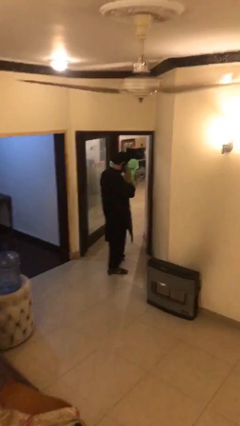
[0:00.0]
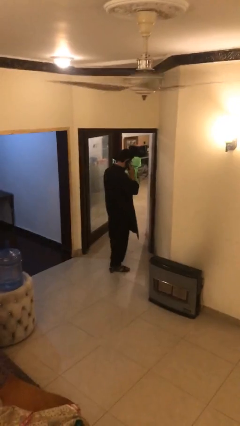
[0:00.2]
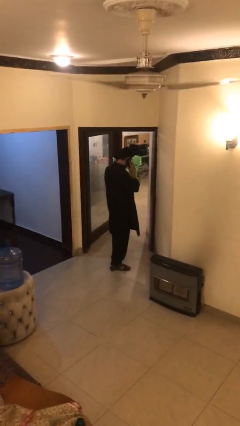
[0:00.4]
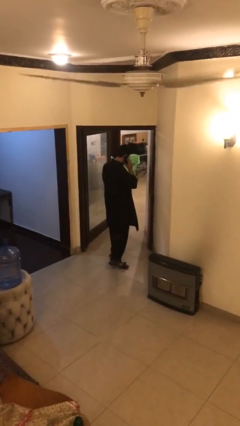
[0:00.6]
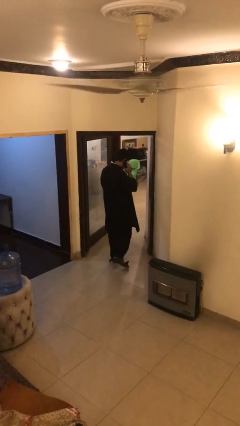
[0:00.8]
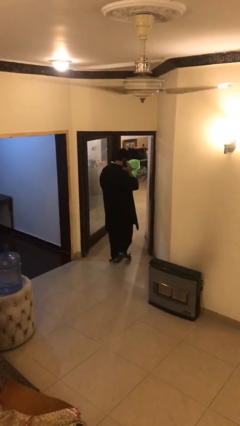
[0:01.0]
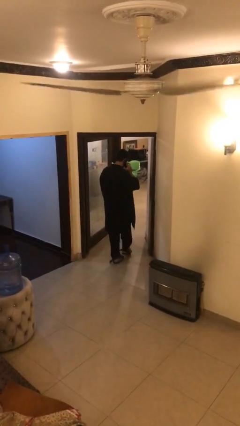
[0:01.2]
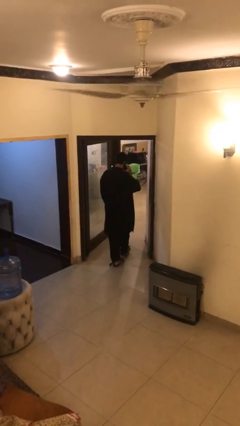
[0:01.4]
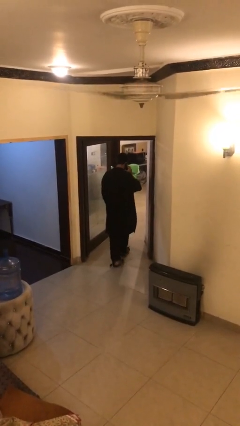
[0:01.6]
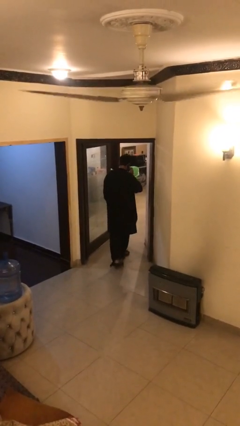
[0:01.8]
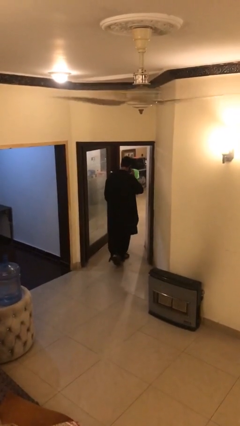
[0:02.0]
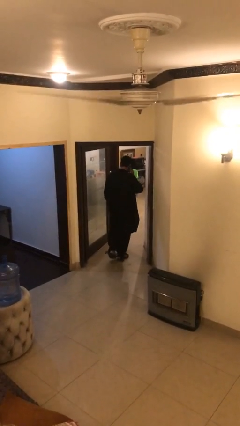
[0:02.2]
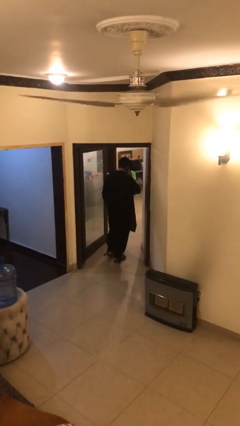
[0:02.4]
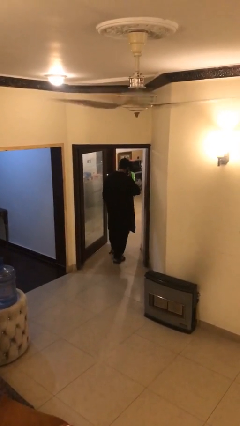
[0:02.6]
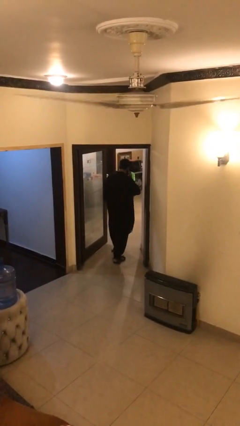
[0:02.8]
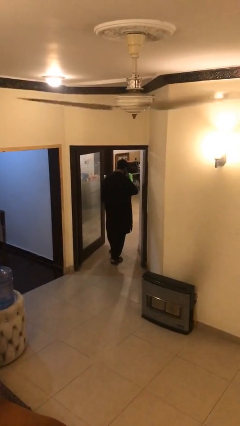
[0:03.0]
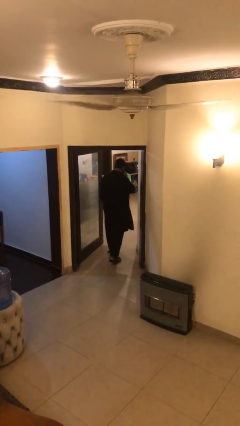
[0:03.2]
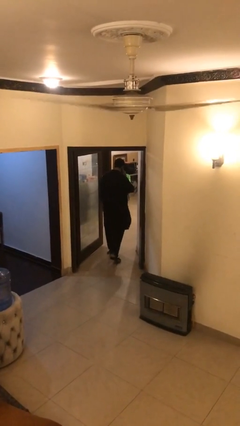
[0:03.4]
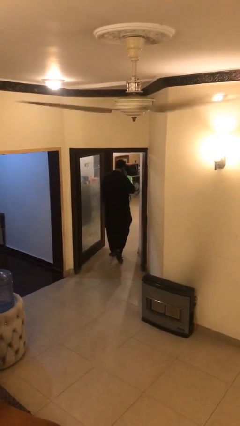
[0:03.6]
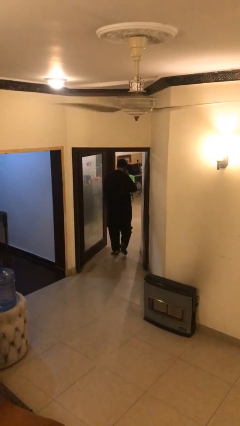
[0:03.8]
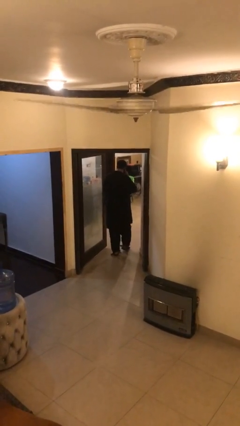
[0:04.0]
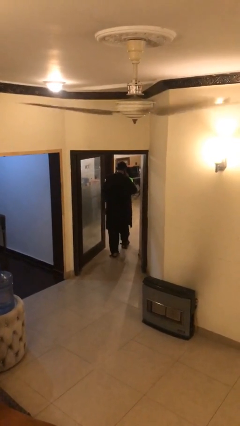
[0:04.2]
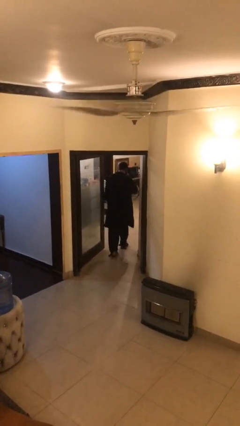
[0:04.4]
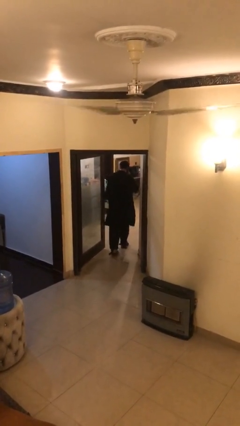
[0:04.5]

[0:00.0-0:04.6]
person exits scene through structure

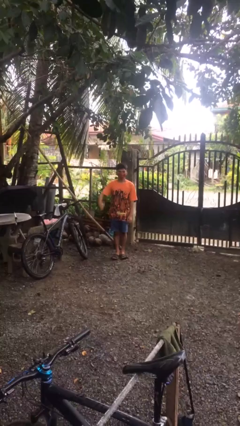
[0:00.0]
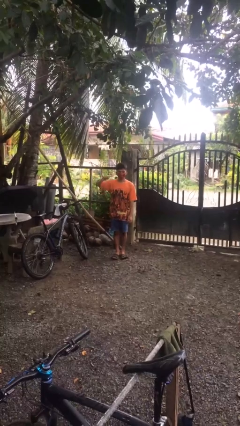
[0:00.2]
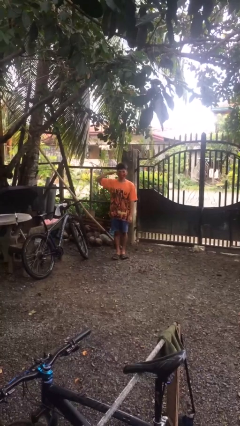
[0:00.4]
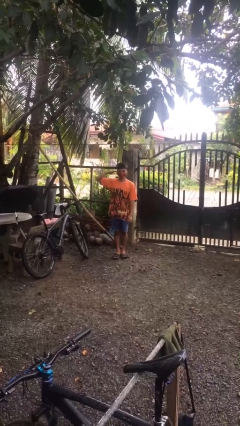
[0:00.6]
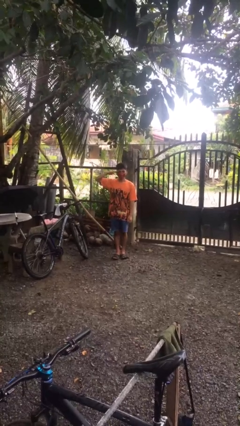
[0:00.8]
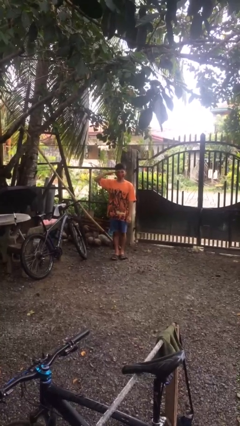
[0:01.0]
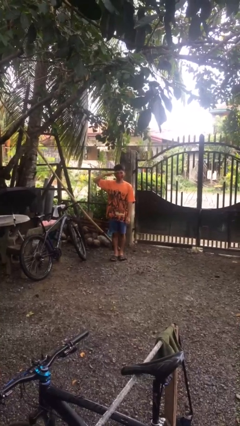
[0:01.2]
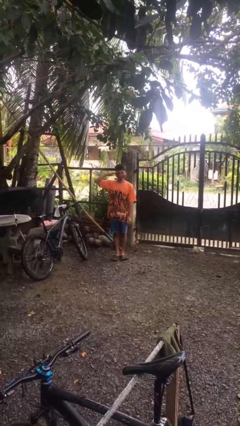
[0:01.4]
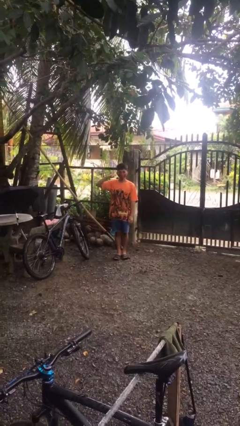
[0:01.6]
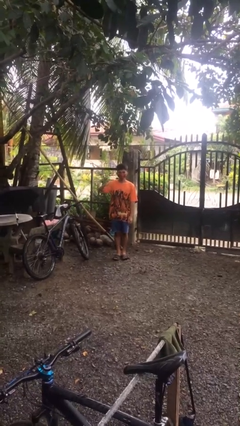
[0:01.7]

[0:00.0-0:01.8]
person salutes

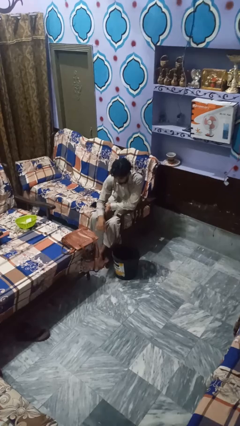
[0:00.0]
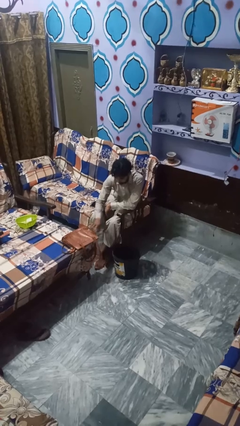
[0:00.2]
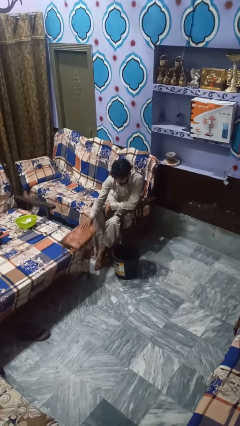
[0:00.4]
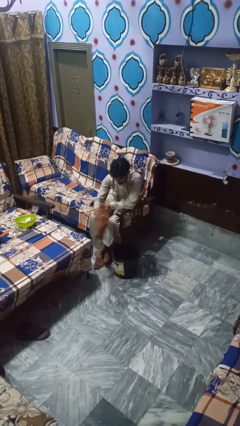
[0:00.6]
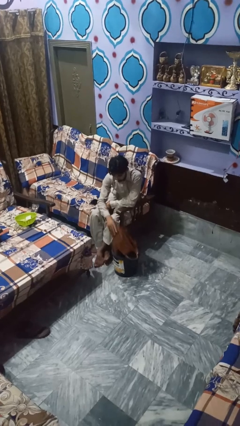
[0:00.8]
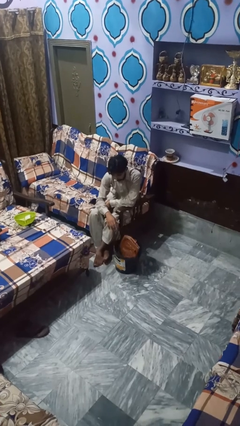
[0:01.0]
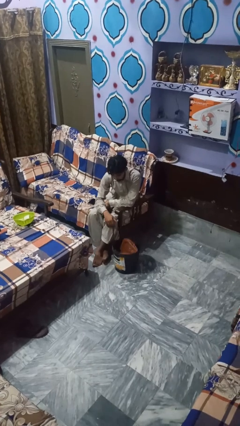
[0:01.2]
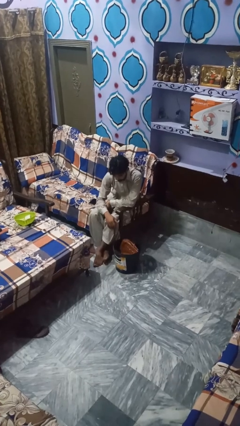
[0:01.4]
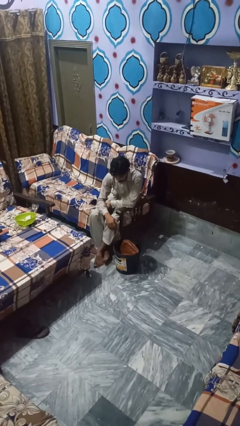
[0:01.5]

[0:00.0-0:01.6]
person puts object into basket

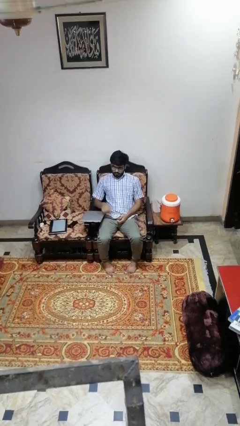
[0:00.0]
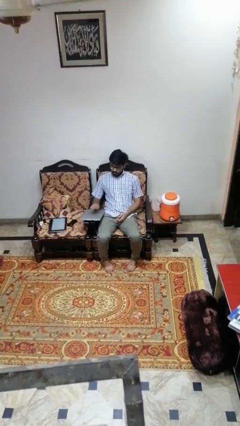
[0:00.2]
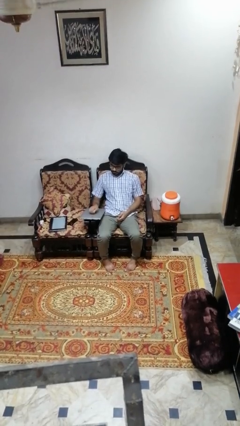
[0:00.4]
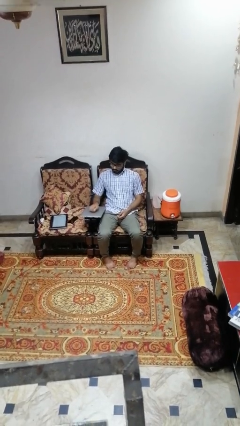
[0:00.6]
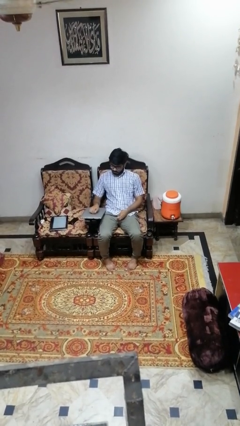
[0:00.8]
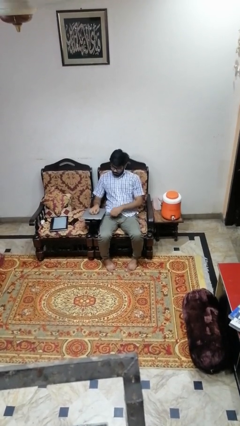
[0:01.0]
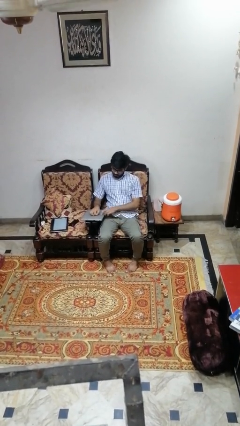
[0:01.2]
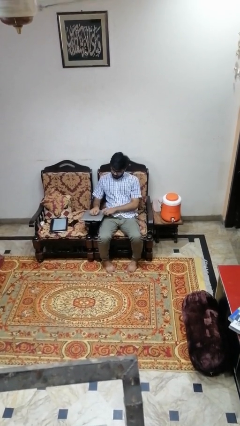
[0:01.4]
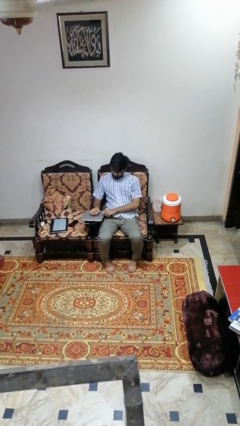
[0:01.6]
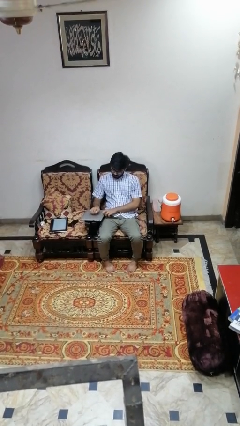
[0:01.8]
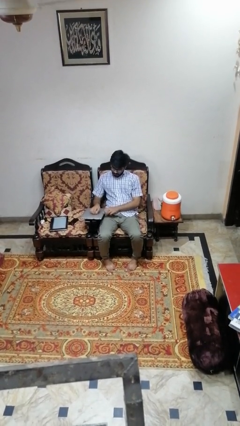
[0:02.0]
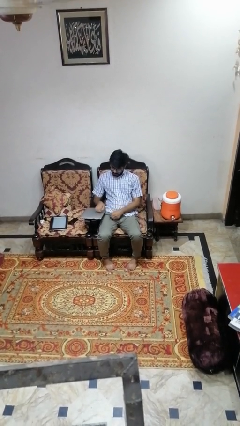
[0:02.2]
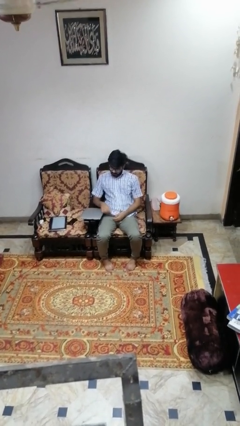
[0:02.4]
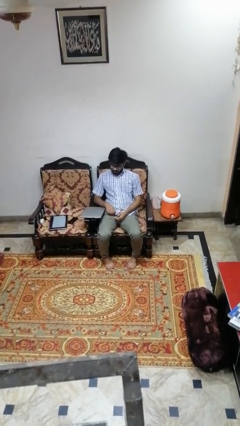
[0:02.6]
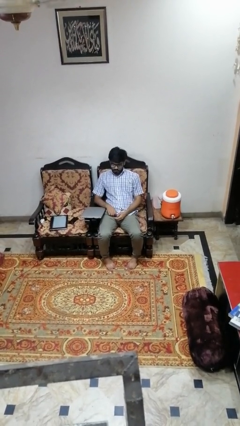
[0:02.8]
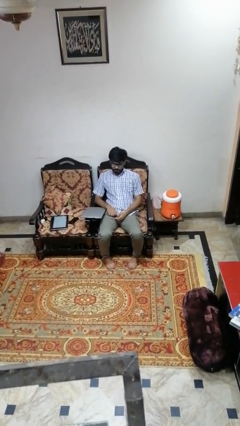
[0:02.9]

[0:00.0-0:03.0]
person taps object with finger

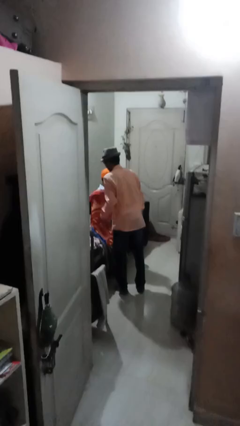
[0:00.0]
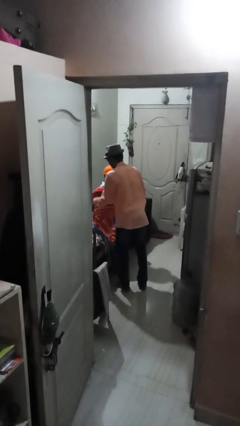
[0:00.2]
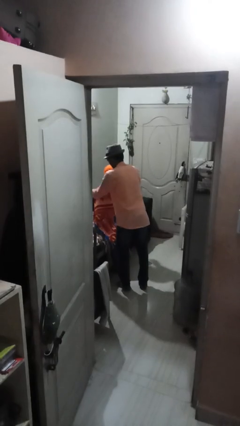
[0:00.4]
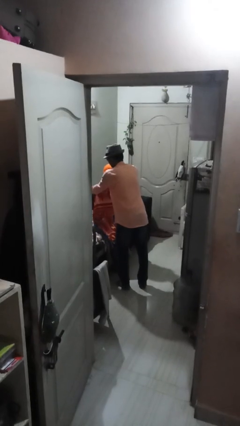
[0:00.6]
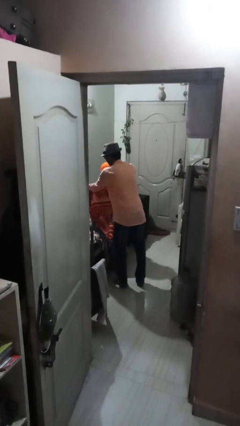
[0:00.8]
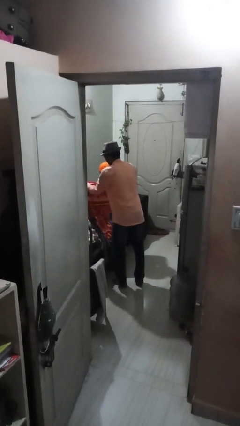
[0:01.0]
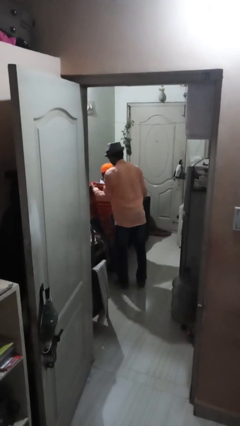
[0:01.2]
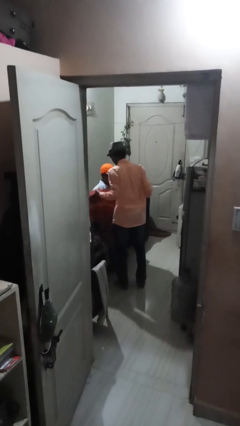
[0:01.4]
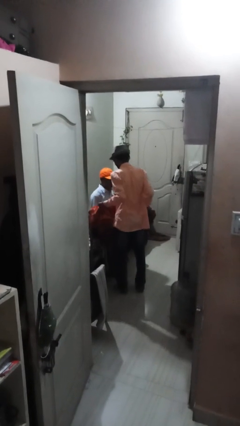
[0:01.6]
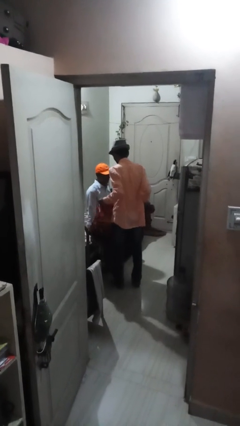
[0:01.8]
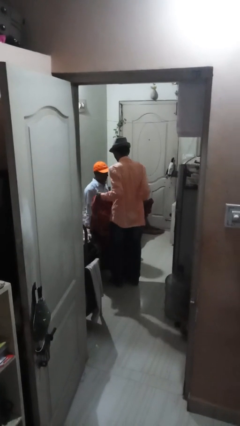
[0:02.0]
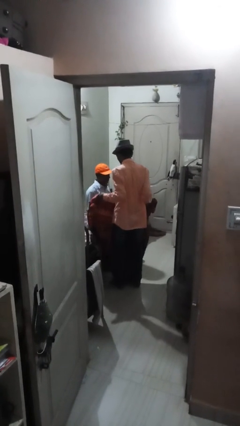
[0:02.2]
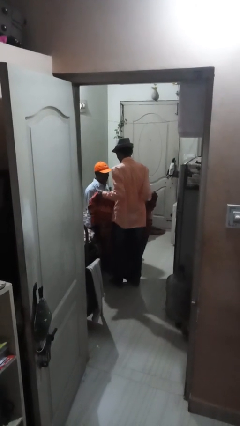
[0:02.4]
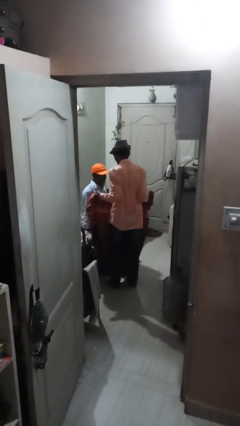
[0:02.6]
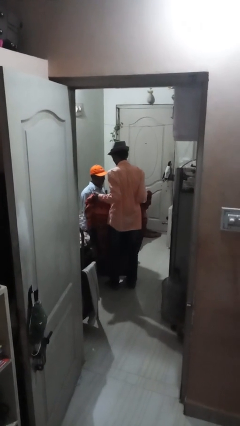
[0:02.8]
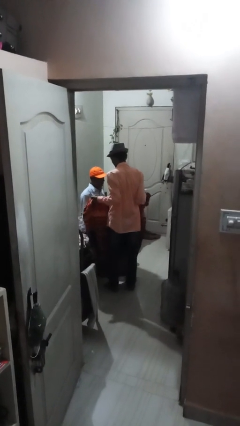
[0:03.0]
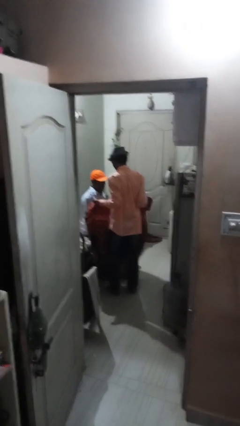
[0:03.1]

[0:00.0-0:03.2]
person uncovers friend with blanket

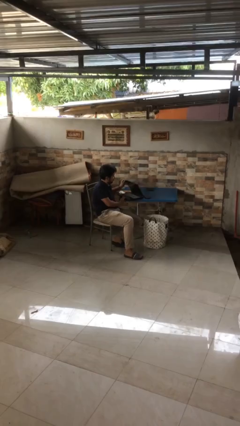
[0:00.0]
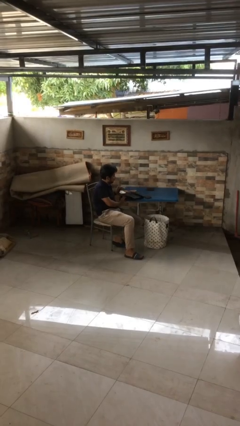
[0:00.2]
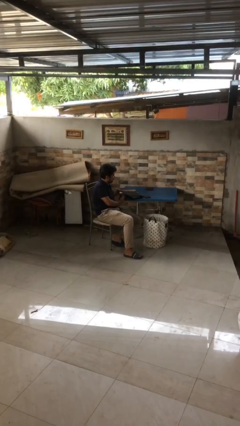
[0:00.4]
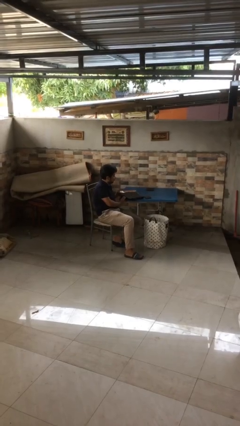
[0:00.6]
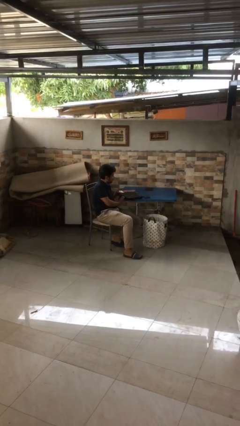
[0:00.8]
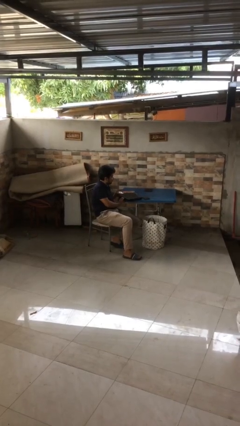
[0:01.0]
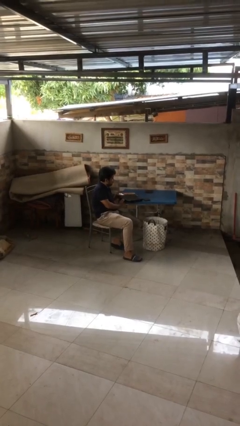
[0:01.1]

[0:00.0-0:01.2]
person closes laptop

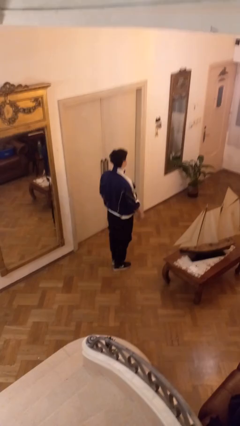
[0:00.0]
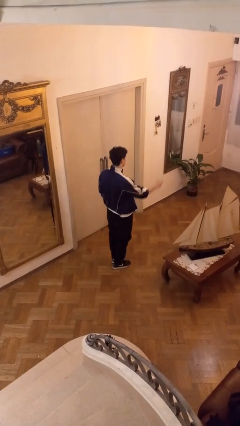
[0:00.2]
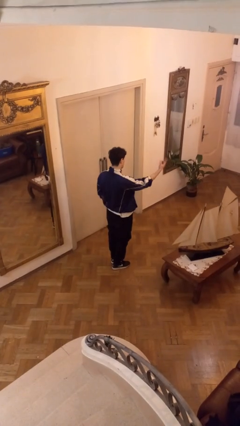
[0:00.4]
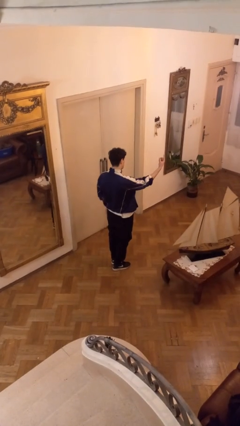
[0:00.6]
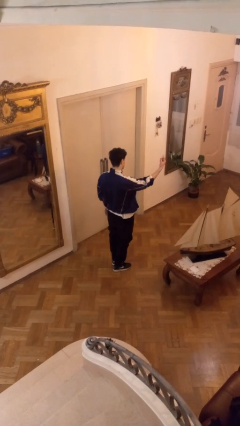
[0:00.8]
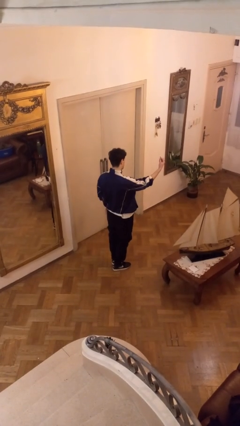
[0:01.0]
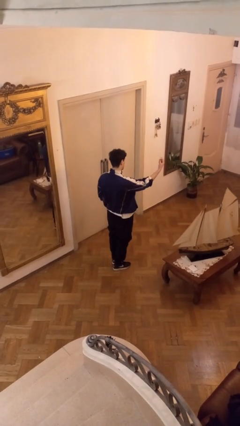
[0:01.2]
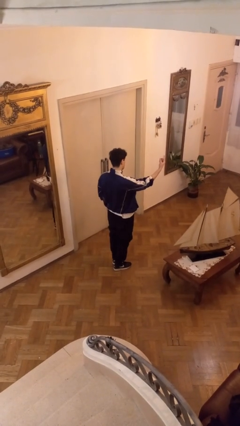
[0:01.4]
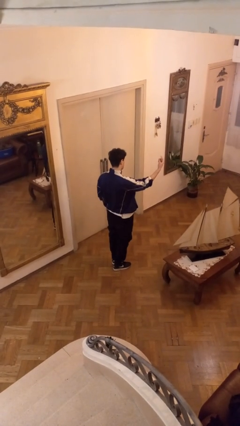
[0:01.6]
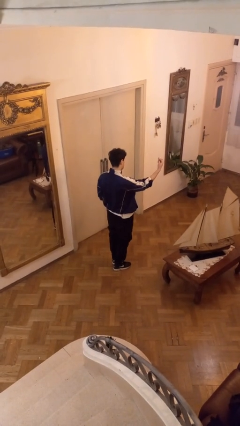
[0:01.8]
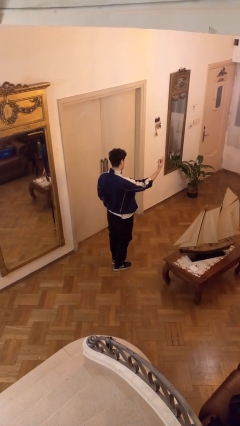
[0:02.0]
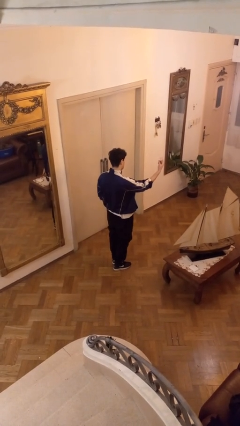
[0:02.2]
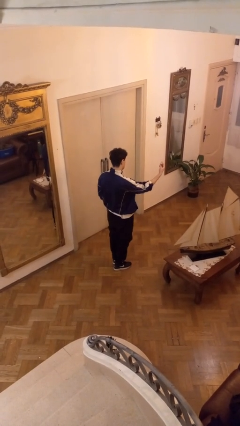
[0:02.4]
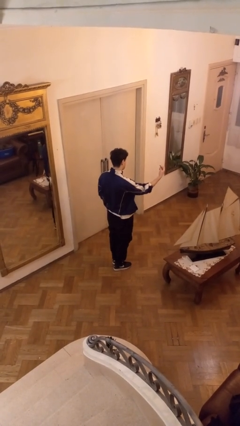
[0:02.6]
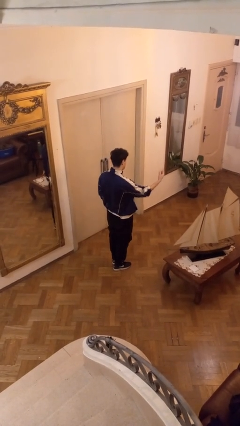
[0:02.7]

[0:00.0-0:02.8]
person gestures come here
